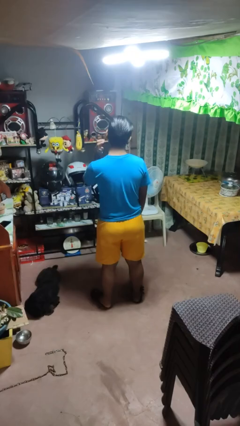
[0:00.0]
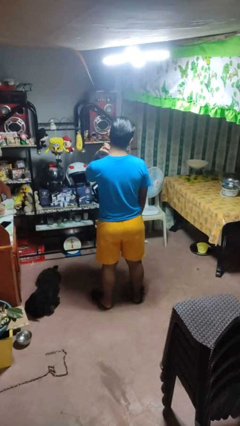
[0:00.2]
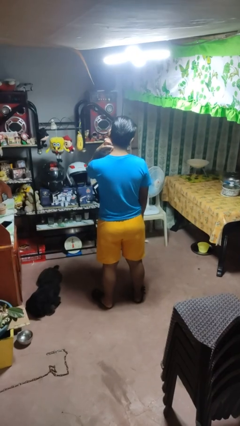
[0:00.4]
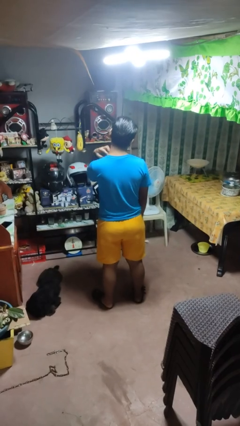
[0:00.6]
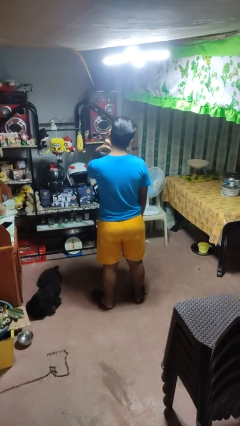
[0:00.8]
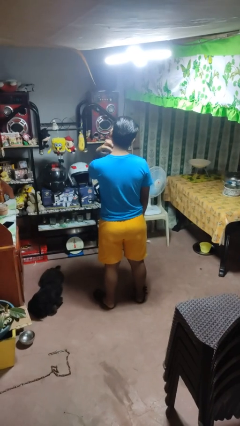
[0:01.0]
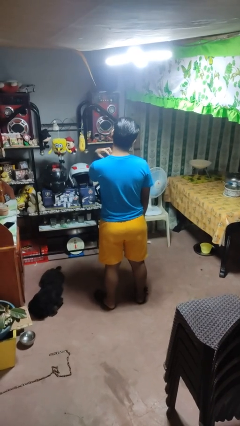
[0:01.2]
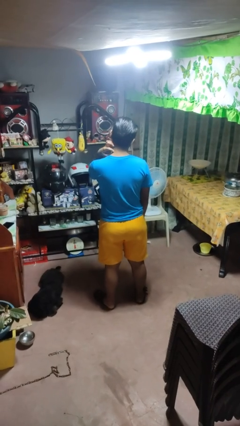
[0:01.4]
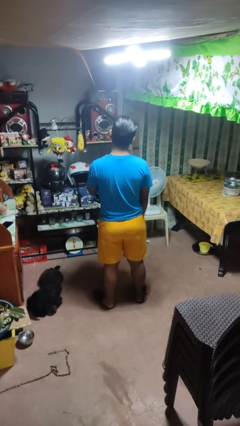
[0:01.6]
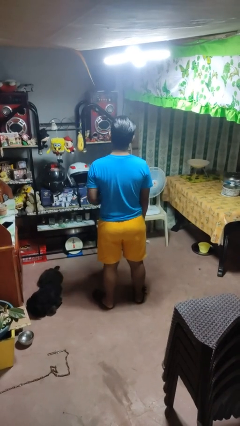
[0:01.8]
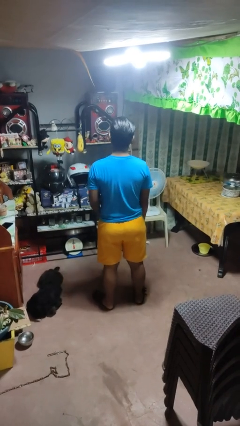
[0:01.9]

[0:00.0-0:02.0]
person scratches face

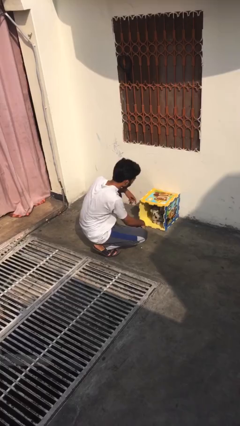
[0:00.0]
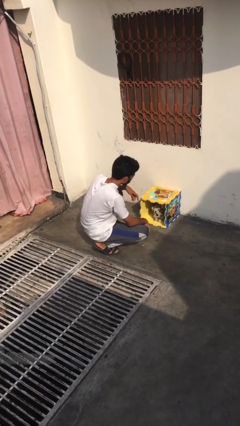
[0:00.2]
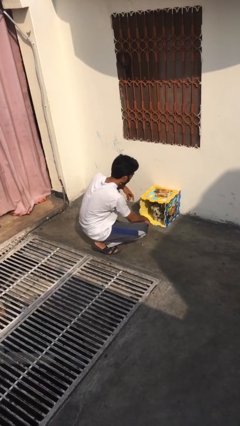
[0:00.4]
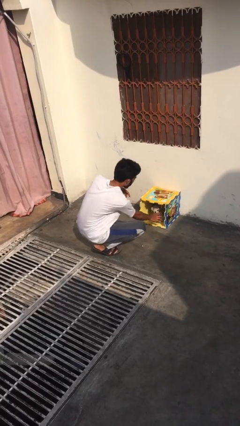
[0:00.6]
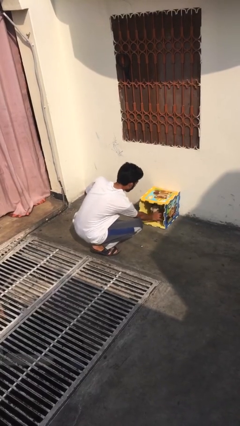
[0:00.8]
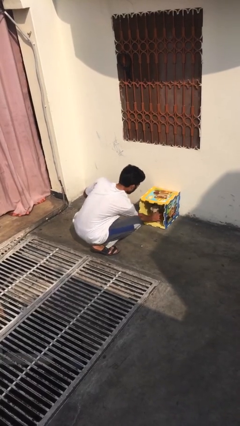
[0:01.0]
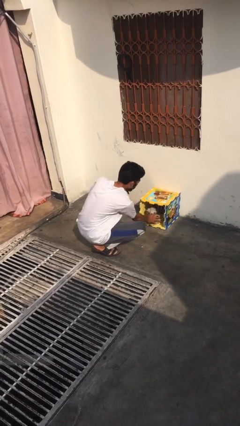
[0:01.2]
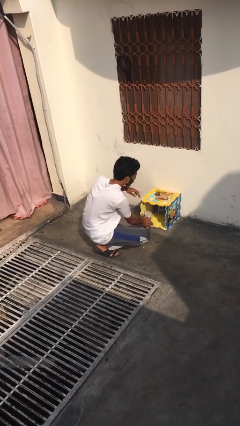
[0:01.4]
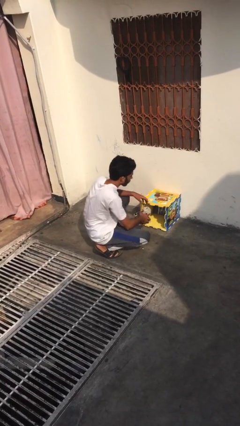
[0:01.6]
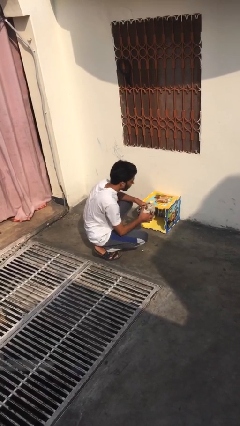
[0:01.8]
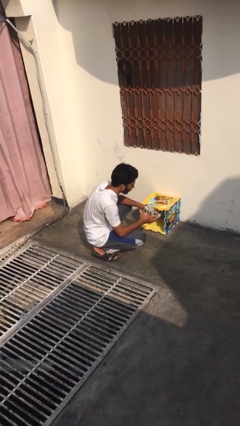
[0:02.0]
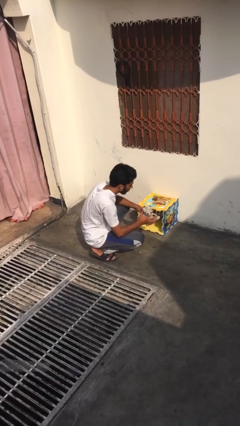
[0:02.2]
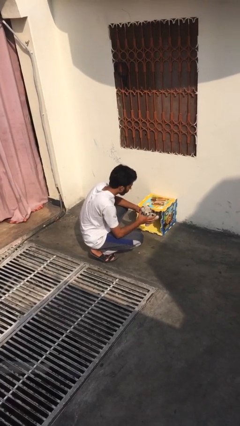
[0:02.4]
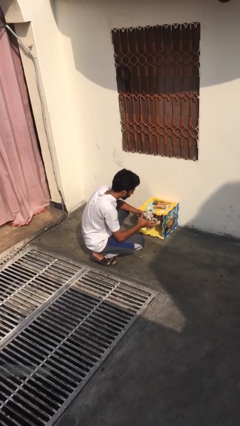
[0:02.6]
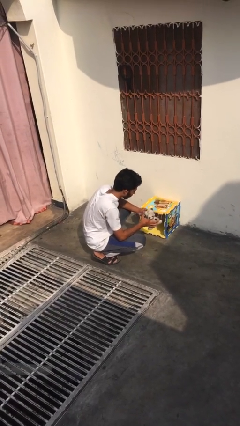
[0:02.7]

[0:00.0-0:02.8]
person uncrates dog

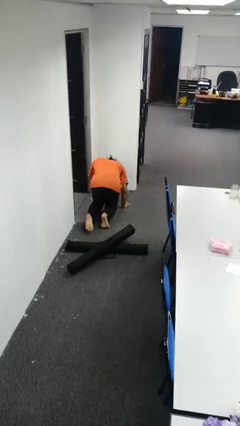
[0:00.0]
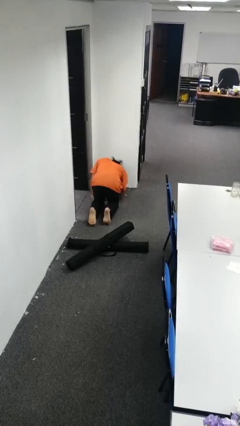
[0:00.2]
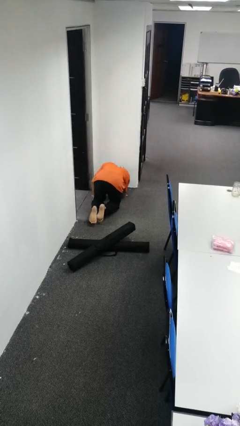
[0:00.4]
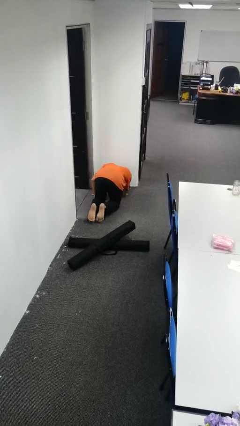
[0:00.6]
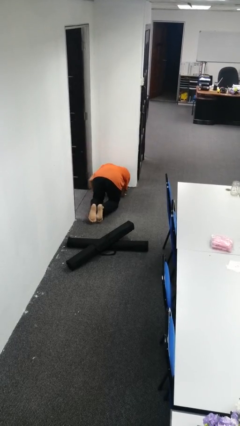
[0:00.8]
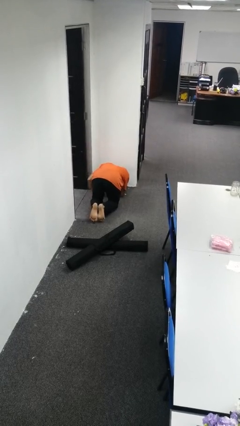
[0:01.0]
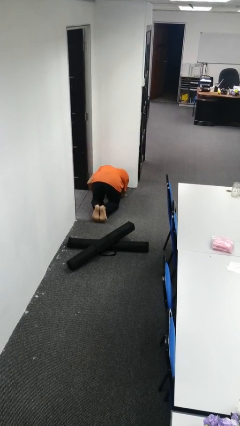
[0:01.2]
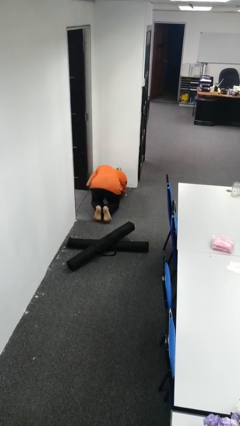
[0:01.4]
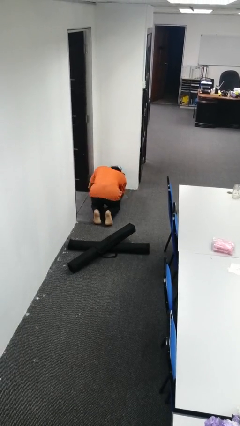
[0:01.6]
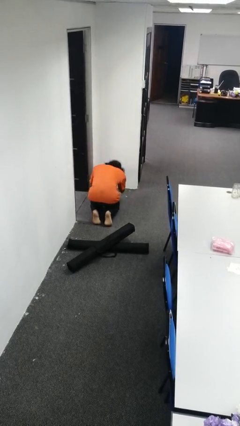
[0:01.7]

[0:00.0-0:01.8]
person lies down on floor

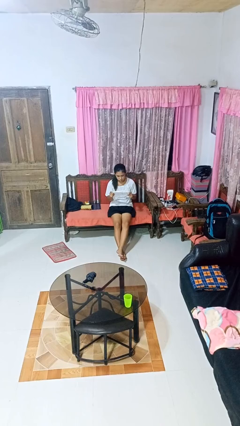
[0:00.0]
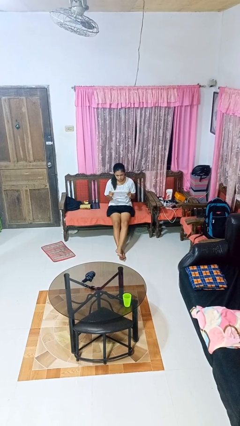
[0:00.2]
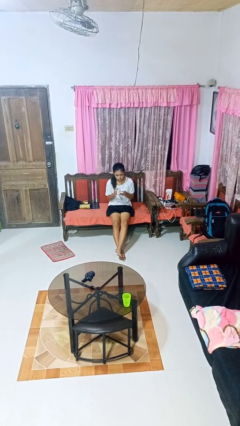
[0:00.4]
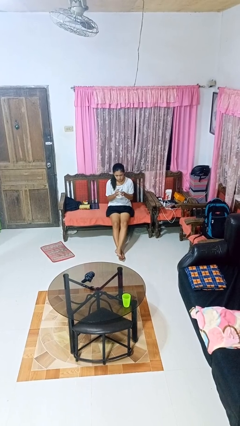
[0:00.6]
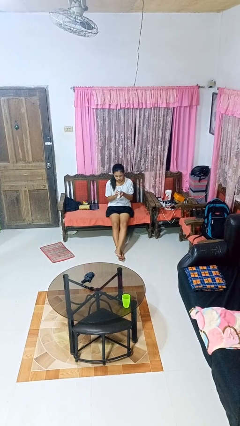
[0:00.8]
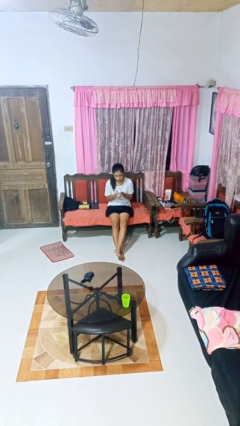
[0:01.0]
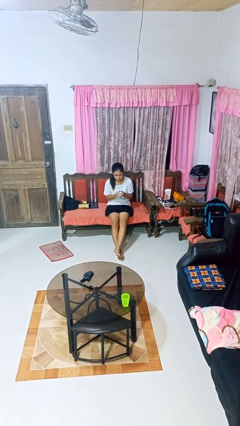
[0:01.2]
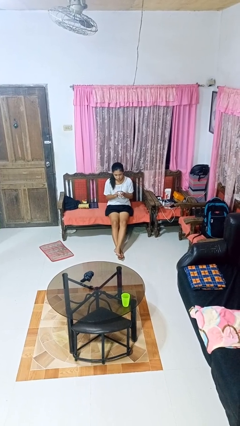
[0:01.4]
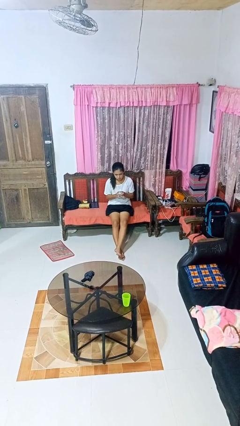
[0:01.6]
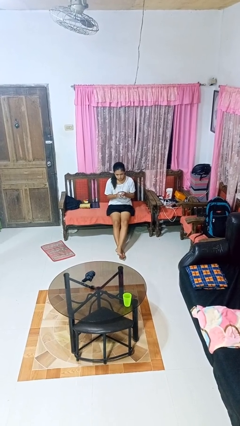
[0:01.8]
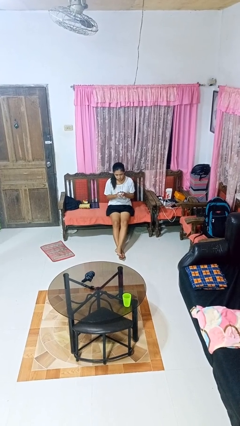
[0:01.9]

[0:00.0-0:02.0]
person crumples paper

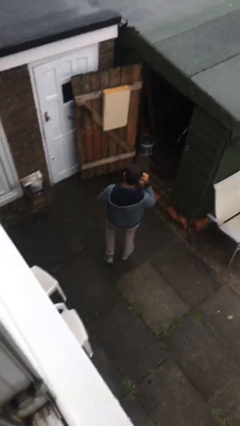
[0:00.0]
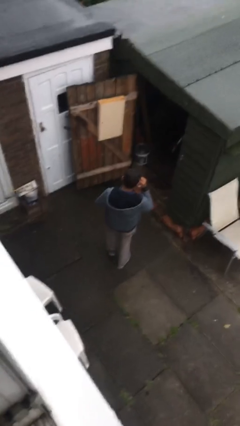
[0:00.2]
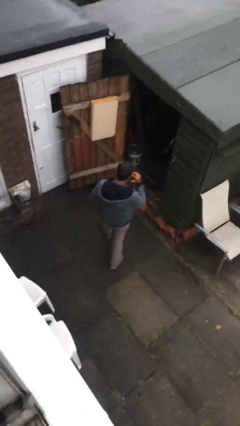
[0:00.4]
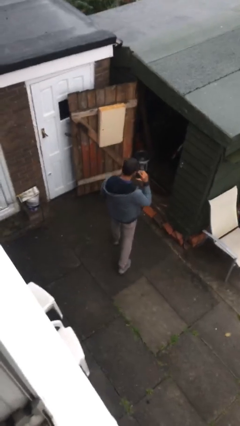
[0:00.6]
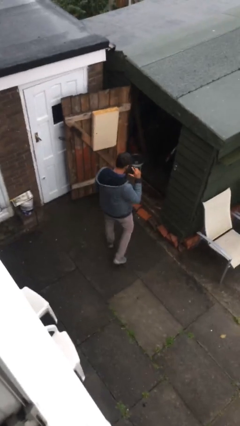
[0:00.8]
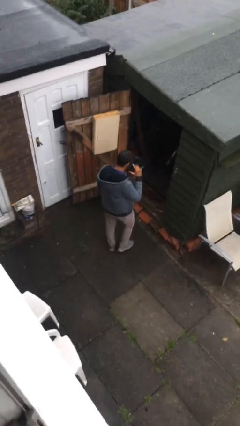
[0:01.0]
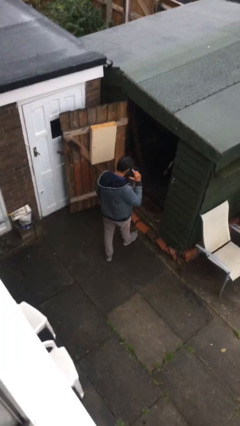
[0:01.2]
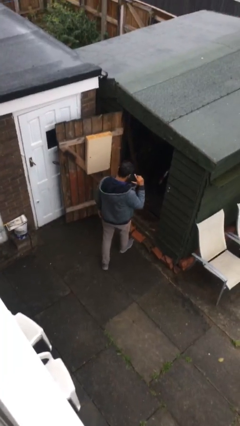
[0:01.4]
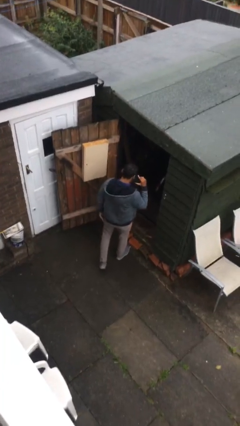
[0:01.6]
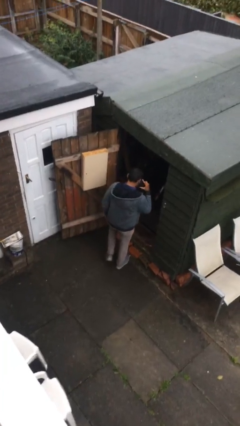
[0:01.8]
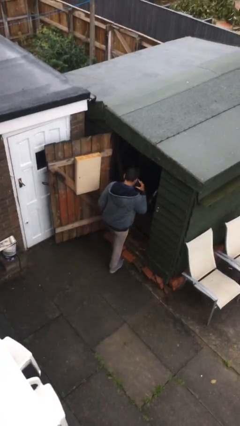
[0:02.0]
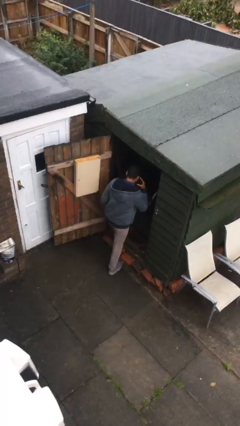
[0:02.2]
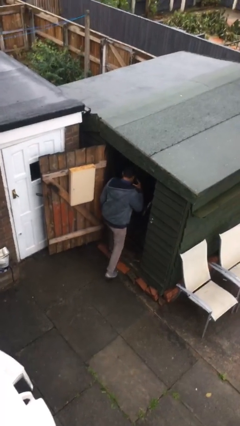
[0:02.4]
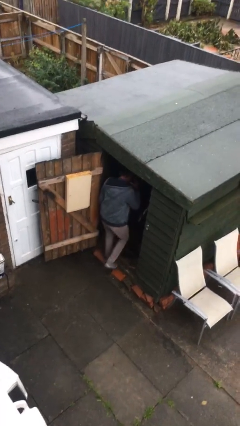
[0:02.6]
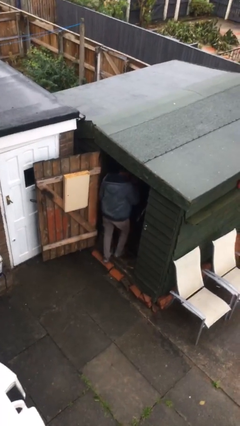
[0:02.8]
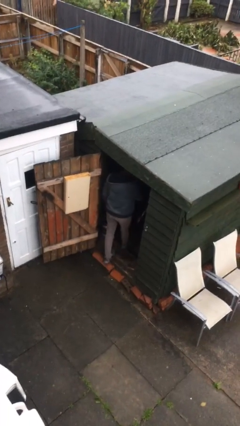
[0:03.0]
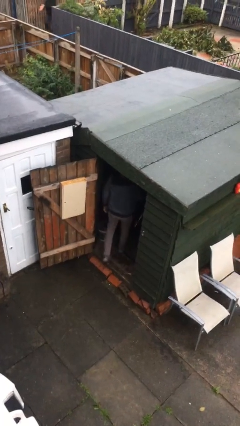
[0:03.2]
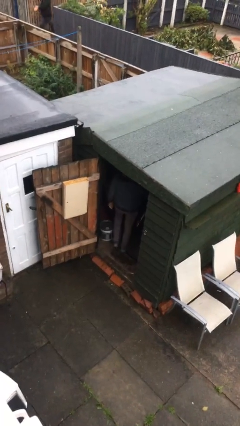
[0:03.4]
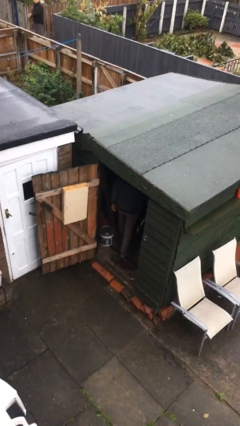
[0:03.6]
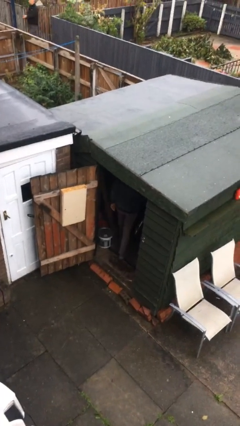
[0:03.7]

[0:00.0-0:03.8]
person exits scene through structure

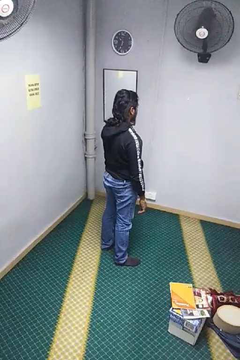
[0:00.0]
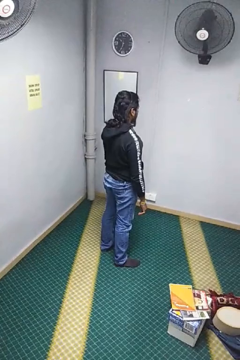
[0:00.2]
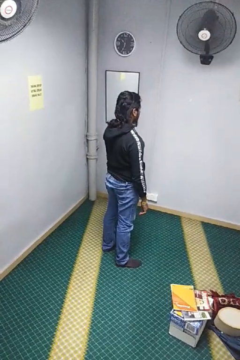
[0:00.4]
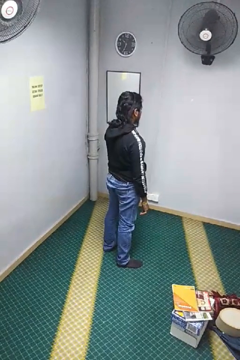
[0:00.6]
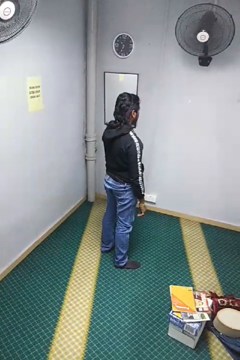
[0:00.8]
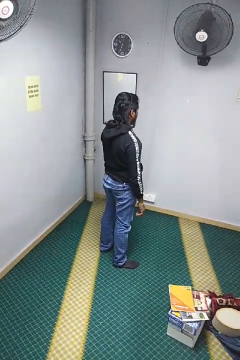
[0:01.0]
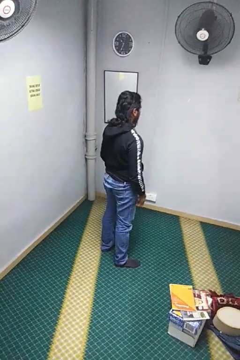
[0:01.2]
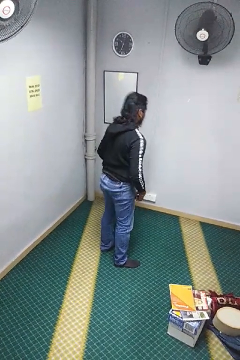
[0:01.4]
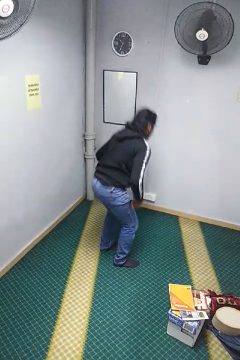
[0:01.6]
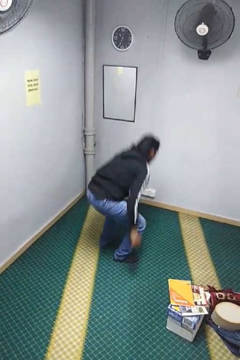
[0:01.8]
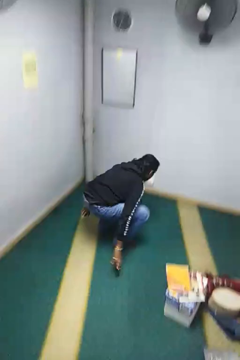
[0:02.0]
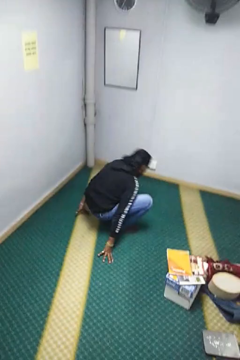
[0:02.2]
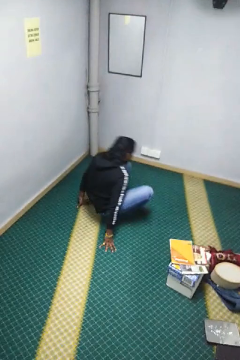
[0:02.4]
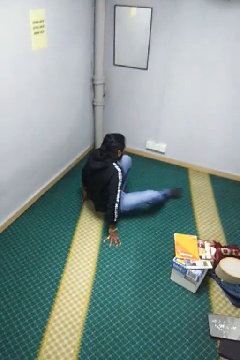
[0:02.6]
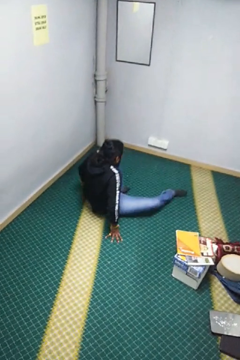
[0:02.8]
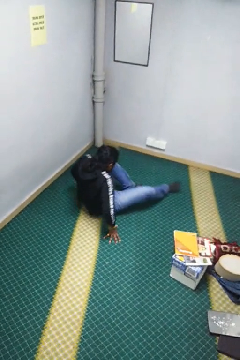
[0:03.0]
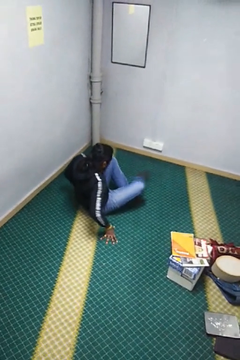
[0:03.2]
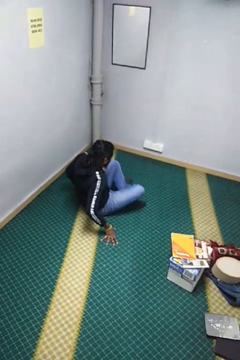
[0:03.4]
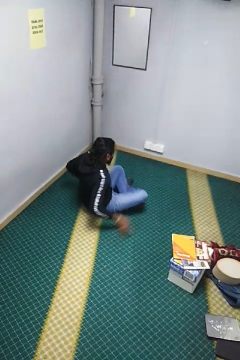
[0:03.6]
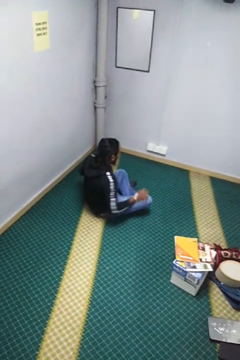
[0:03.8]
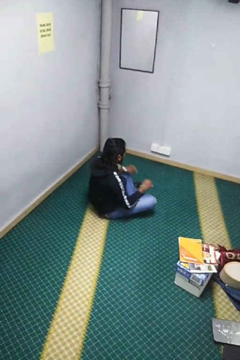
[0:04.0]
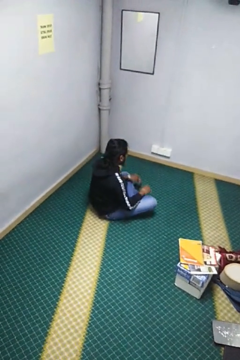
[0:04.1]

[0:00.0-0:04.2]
person sits crisscross

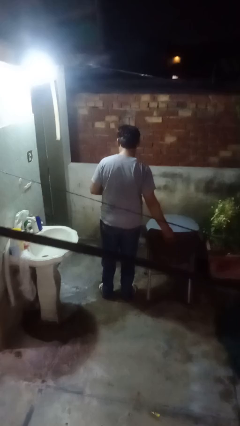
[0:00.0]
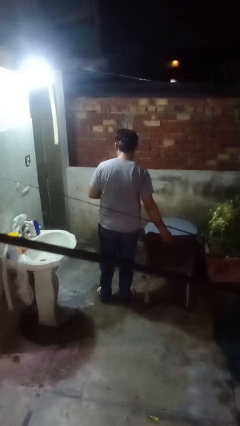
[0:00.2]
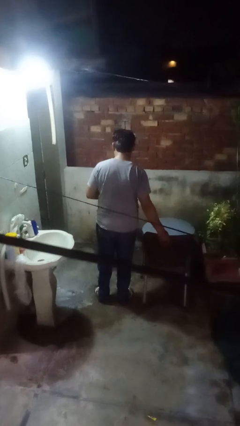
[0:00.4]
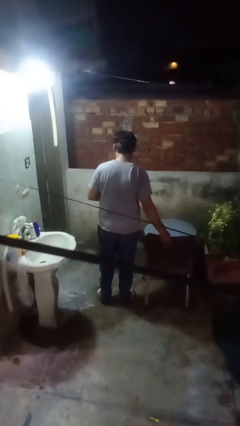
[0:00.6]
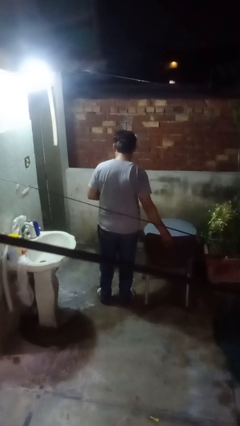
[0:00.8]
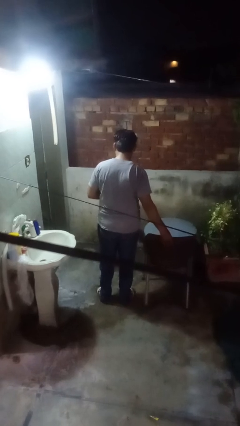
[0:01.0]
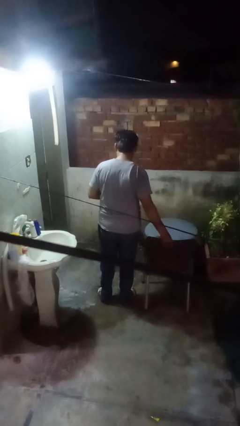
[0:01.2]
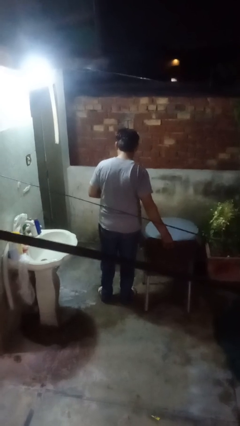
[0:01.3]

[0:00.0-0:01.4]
person pulls out chair
